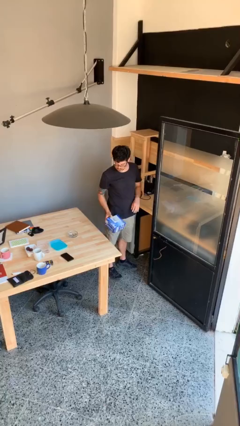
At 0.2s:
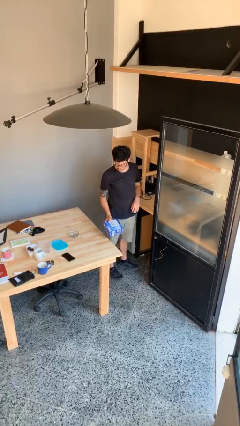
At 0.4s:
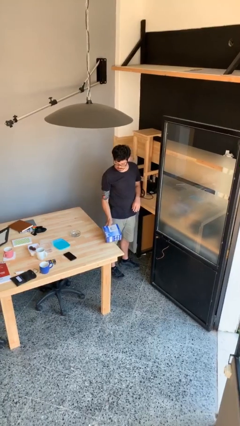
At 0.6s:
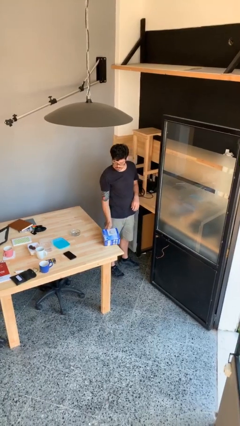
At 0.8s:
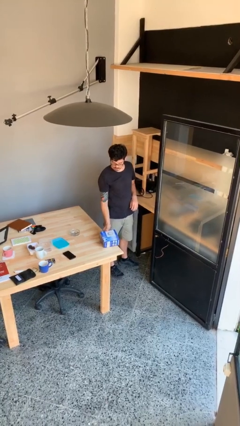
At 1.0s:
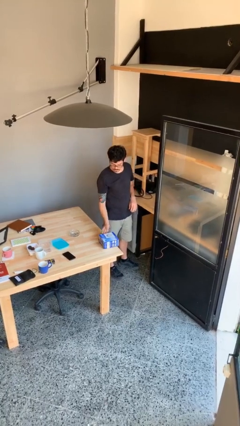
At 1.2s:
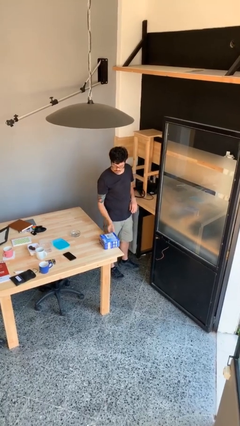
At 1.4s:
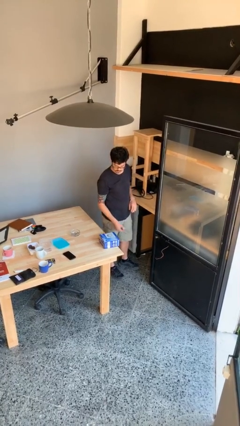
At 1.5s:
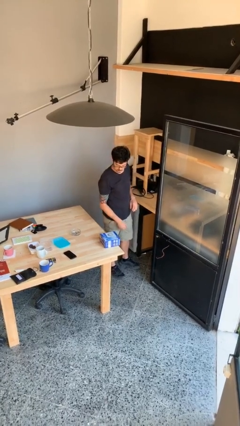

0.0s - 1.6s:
person puts down object on table

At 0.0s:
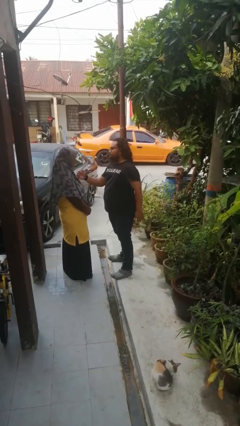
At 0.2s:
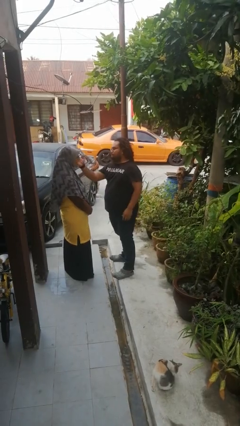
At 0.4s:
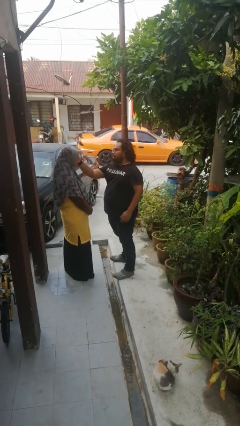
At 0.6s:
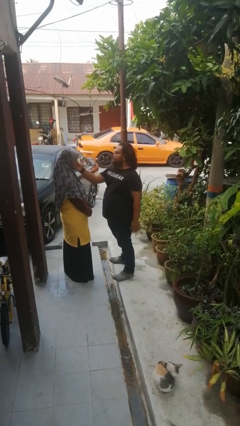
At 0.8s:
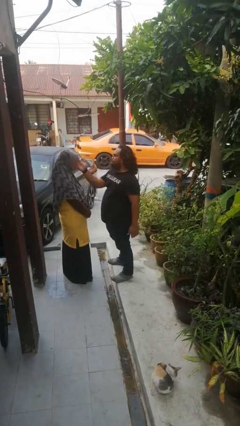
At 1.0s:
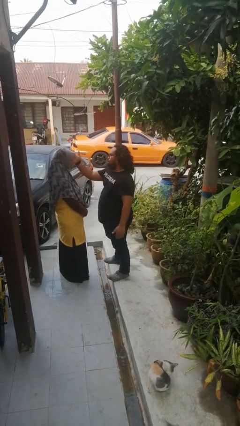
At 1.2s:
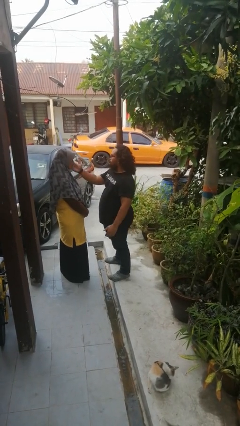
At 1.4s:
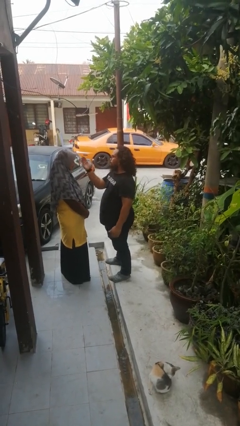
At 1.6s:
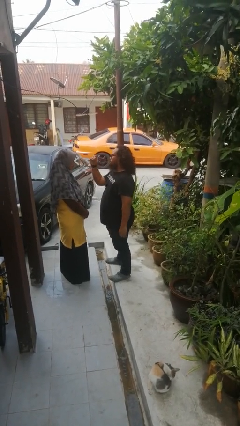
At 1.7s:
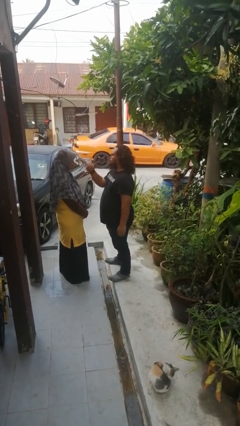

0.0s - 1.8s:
person touches face of person

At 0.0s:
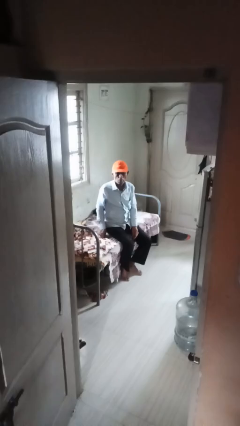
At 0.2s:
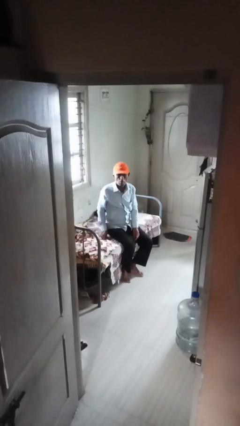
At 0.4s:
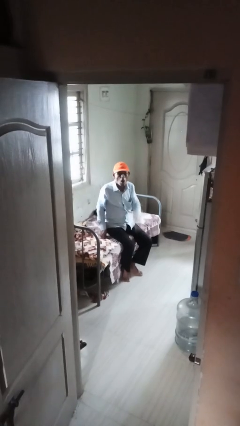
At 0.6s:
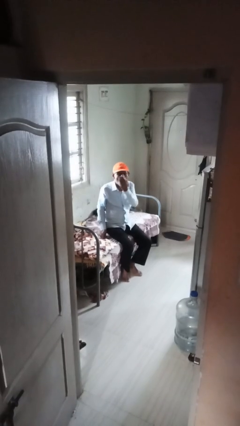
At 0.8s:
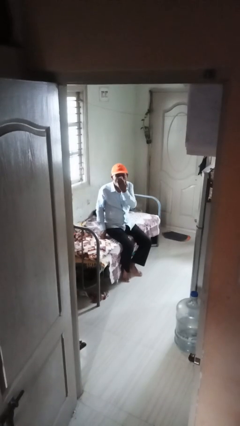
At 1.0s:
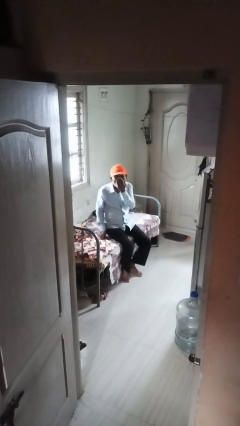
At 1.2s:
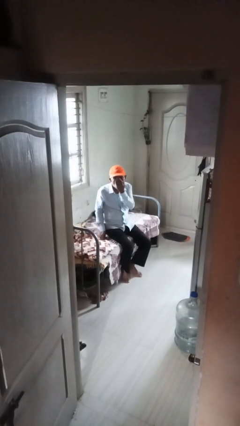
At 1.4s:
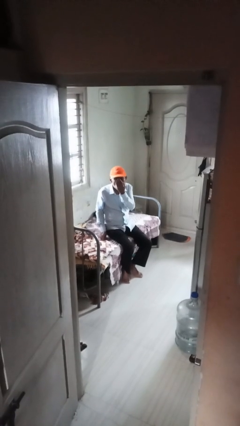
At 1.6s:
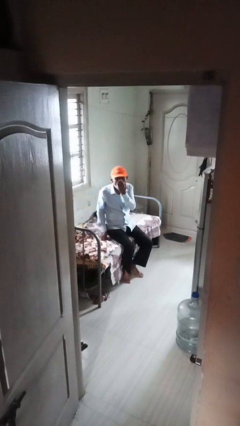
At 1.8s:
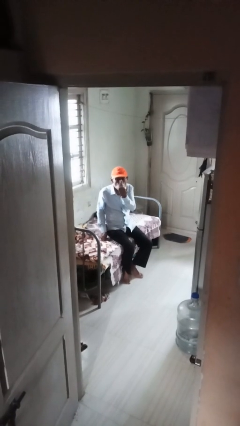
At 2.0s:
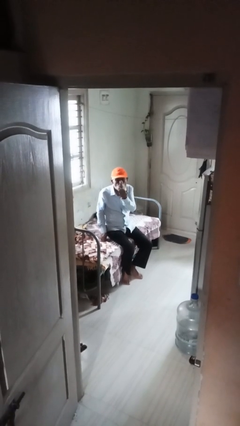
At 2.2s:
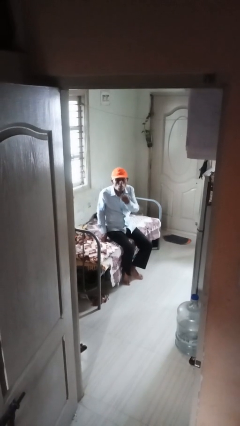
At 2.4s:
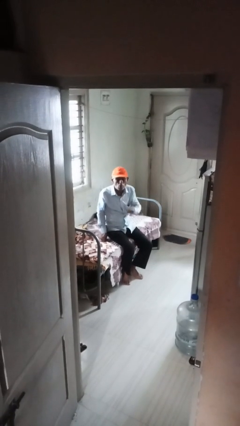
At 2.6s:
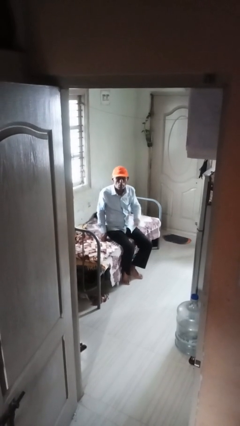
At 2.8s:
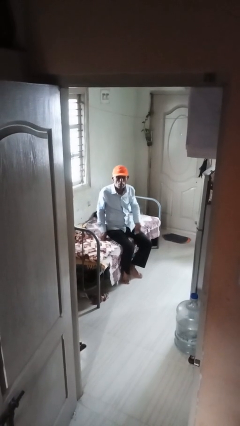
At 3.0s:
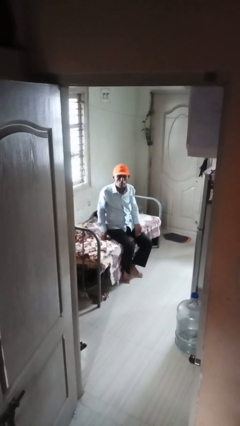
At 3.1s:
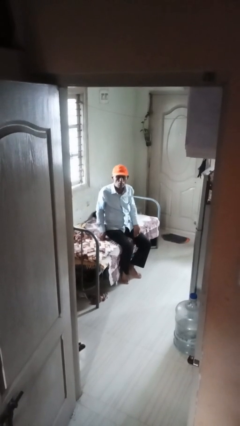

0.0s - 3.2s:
person gestures blow kiss

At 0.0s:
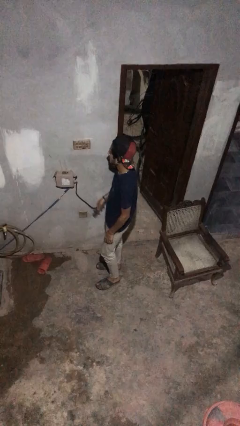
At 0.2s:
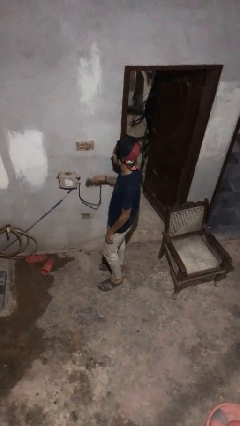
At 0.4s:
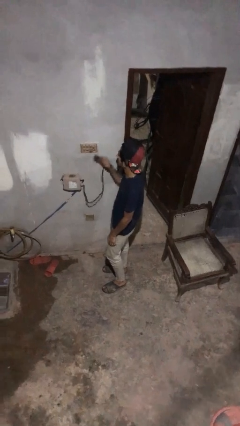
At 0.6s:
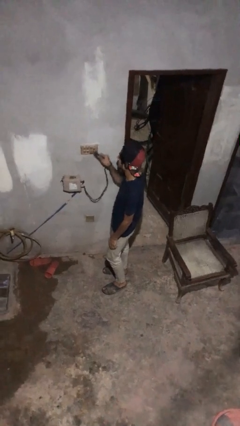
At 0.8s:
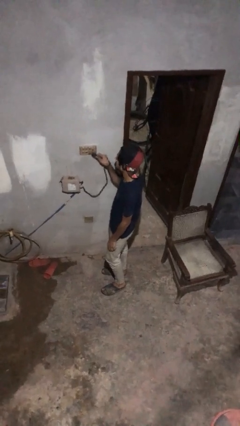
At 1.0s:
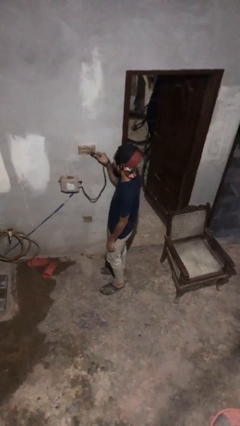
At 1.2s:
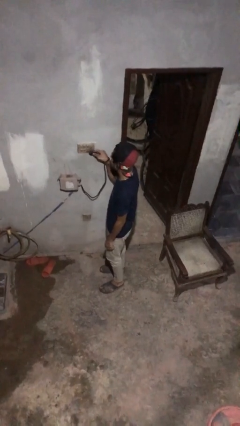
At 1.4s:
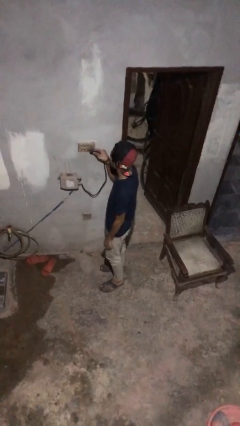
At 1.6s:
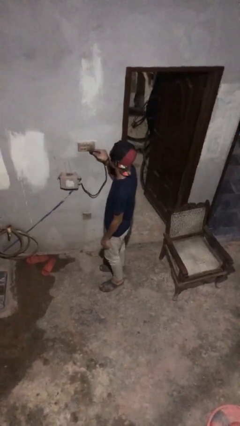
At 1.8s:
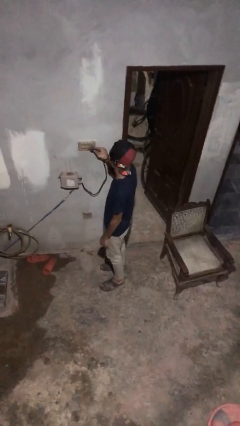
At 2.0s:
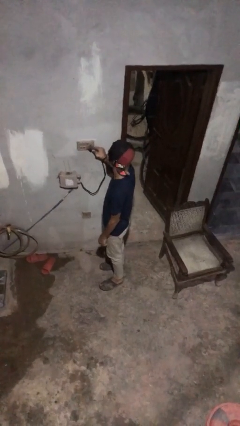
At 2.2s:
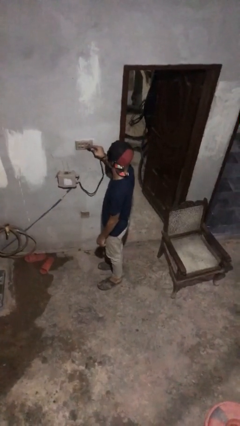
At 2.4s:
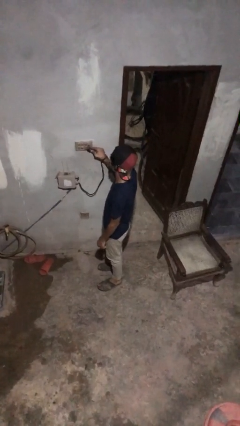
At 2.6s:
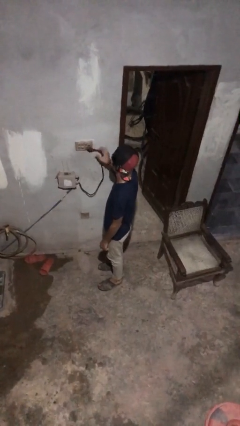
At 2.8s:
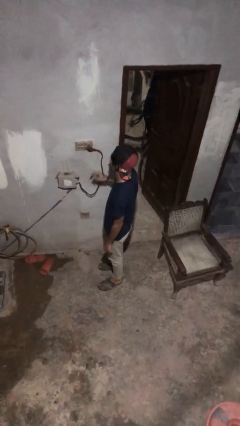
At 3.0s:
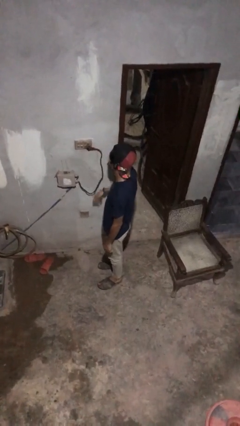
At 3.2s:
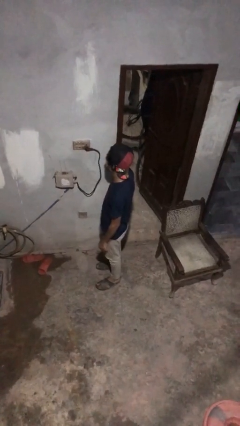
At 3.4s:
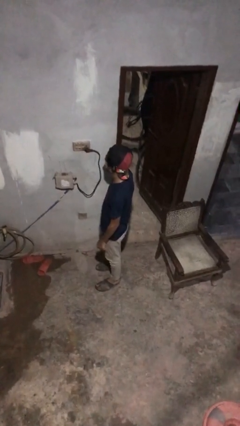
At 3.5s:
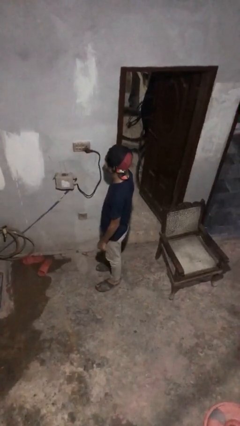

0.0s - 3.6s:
person plugs into electrical socket

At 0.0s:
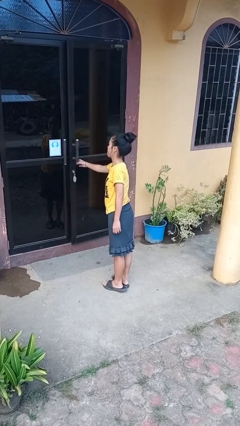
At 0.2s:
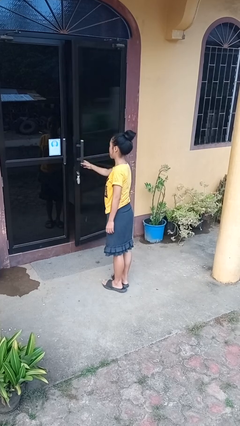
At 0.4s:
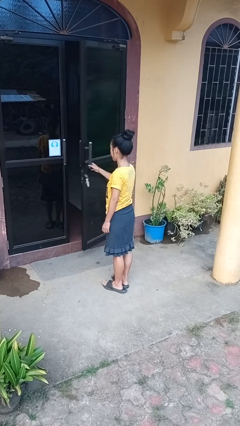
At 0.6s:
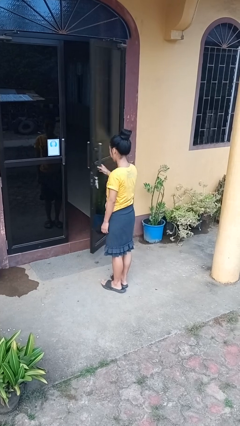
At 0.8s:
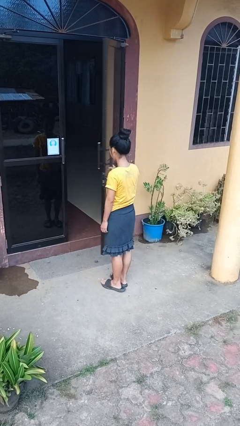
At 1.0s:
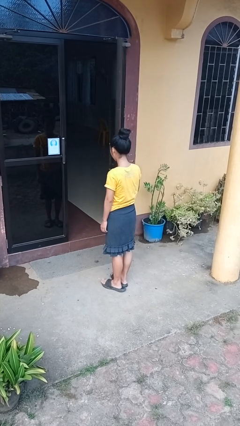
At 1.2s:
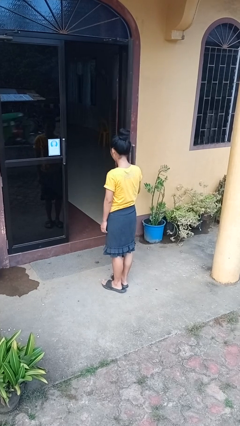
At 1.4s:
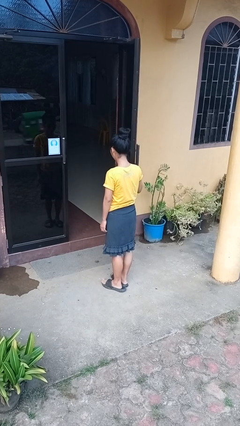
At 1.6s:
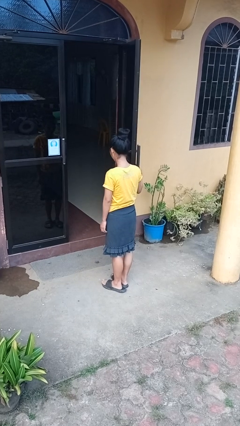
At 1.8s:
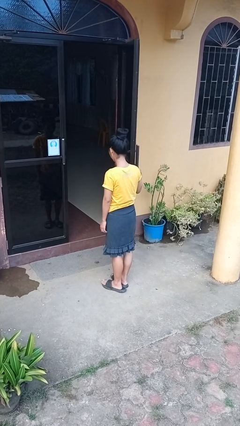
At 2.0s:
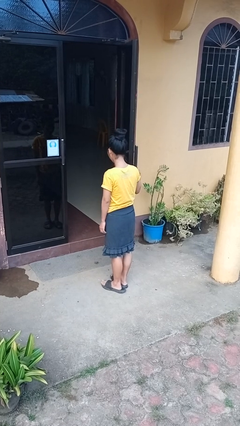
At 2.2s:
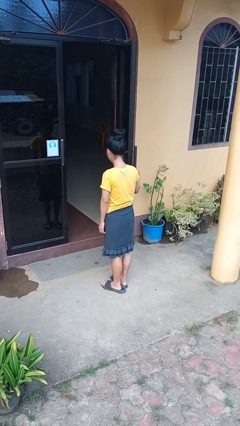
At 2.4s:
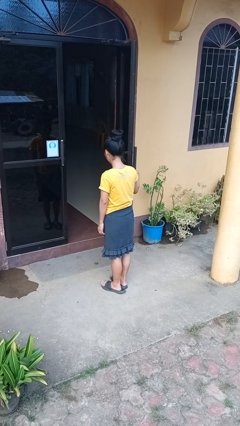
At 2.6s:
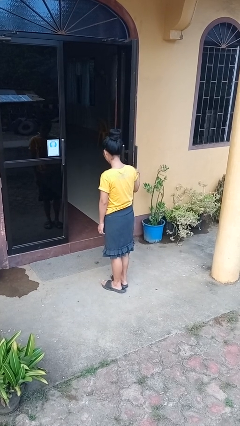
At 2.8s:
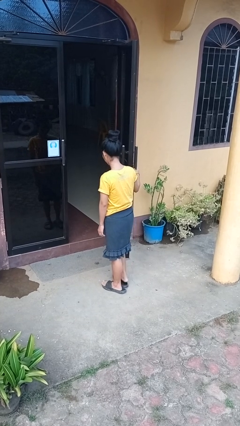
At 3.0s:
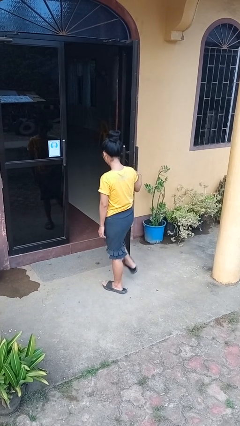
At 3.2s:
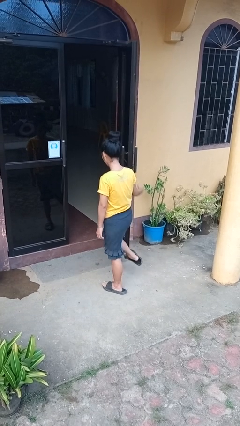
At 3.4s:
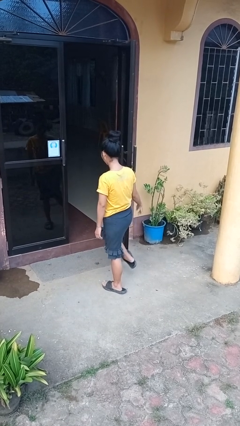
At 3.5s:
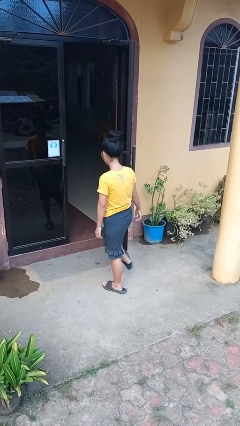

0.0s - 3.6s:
person opens facility door

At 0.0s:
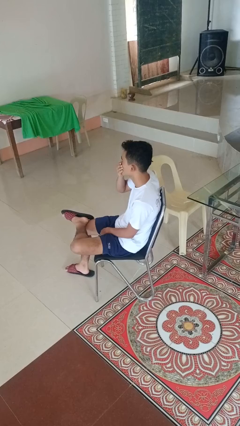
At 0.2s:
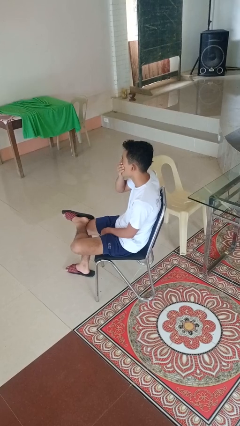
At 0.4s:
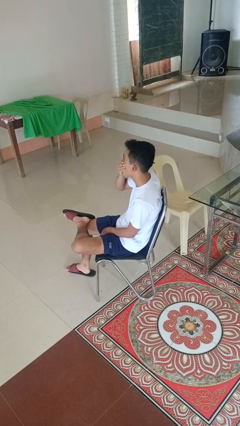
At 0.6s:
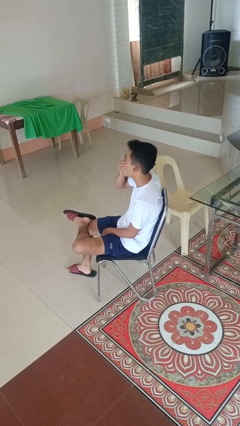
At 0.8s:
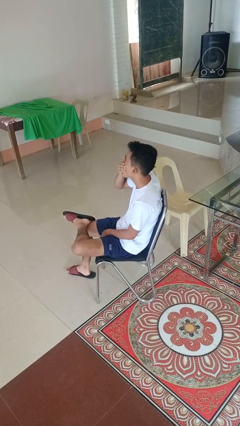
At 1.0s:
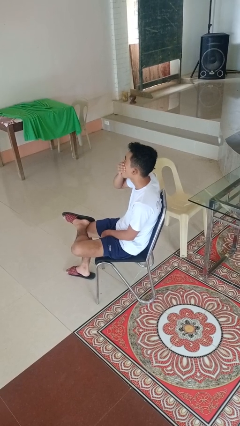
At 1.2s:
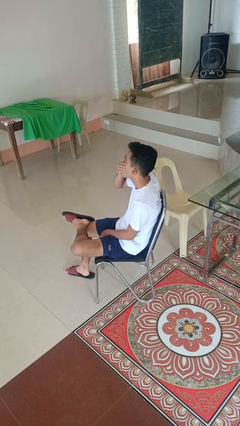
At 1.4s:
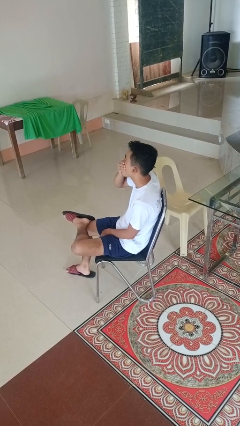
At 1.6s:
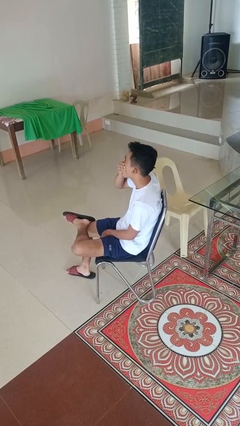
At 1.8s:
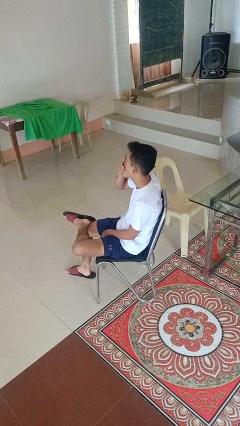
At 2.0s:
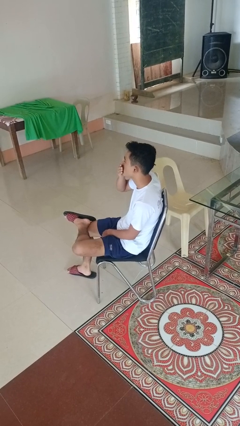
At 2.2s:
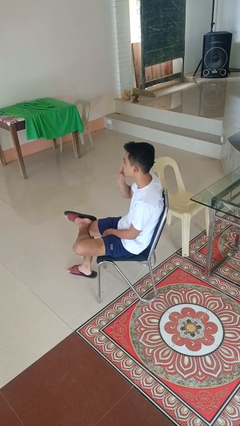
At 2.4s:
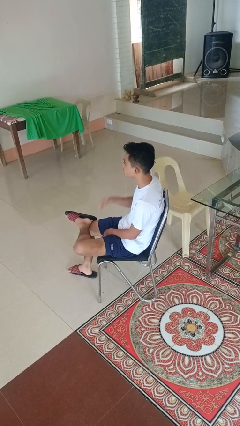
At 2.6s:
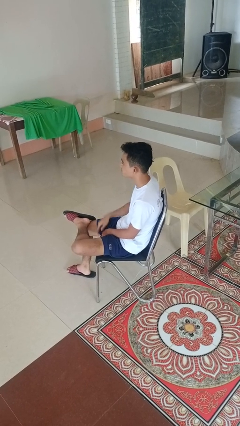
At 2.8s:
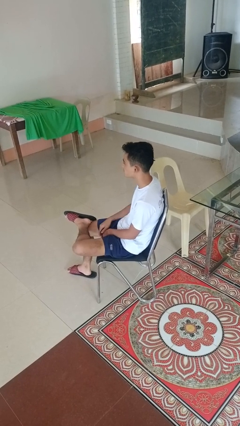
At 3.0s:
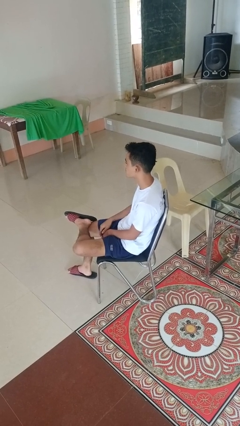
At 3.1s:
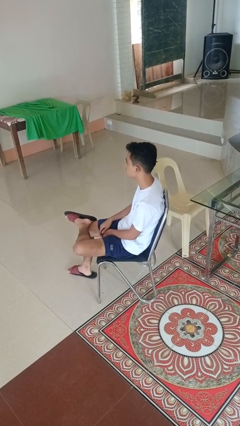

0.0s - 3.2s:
person yawns
